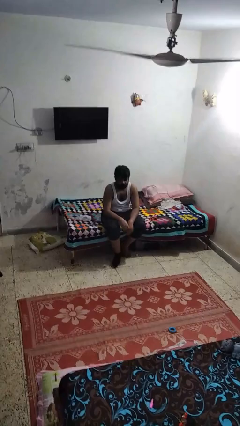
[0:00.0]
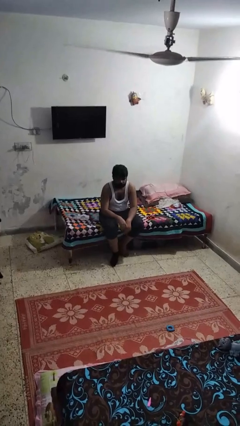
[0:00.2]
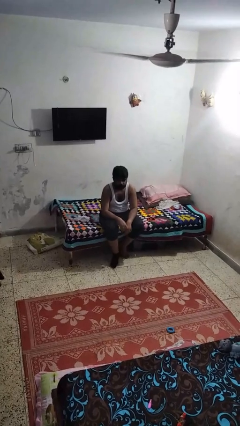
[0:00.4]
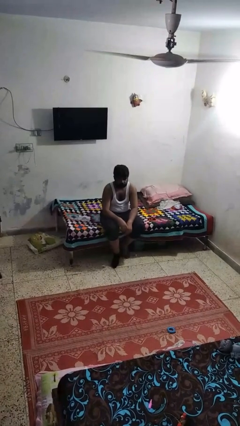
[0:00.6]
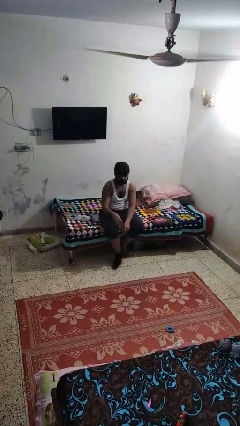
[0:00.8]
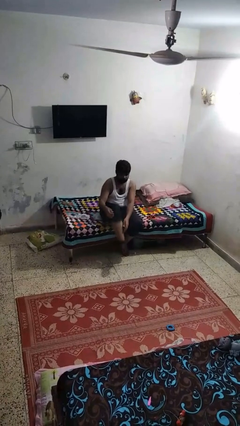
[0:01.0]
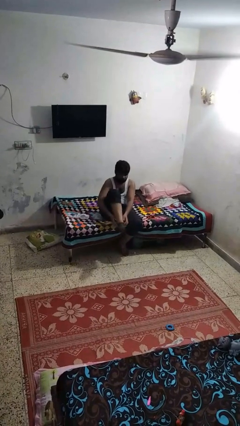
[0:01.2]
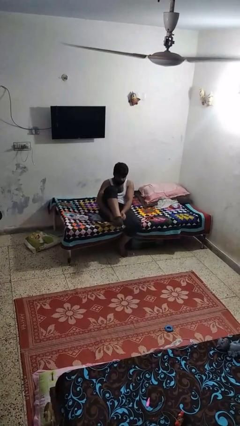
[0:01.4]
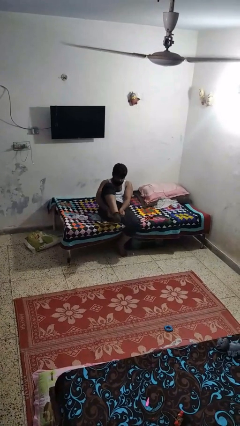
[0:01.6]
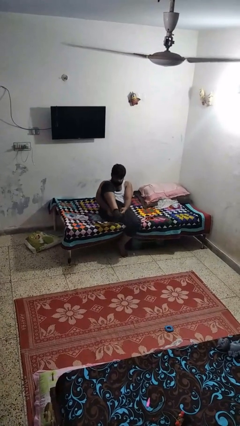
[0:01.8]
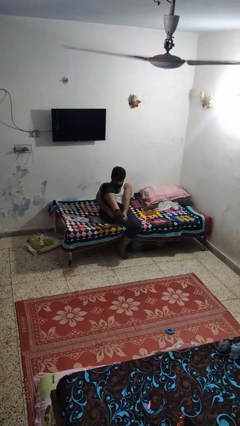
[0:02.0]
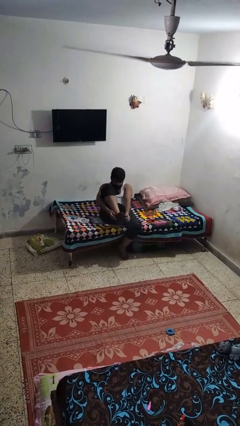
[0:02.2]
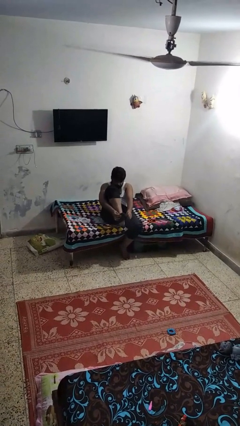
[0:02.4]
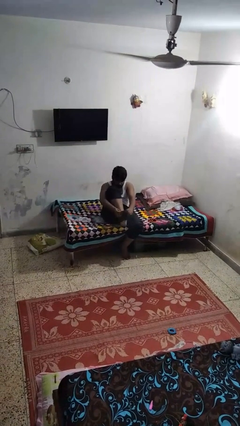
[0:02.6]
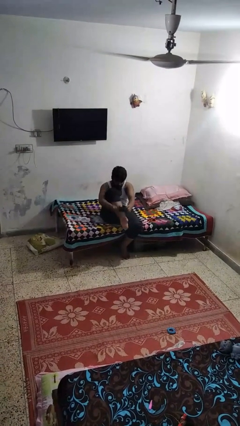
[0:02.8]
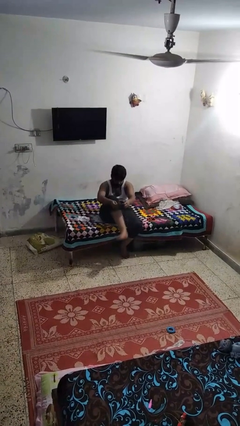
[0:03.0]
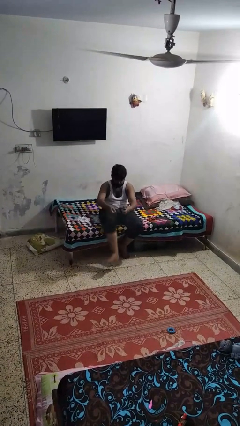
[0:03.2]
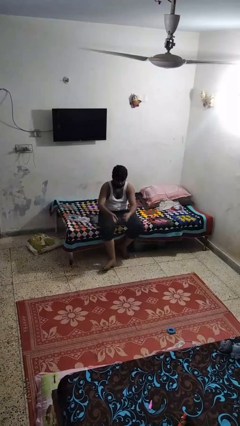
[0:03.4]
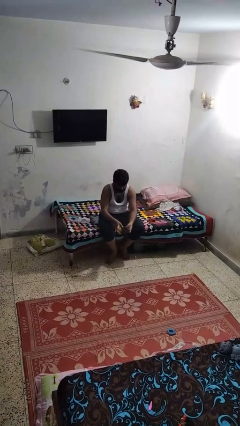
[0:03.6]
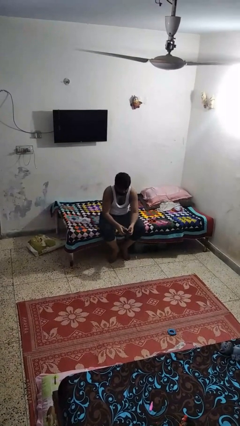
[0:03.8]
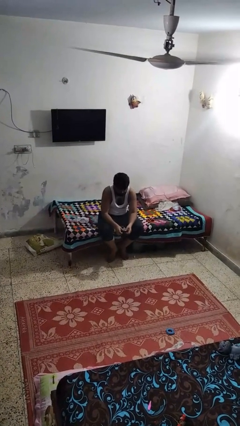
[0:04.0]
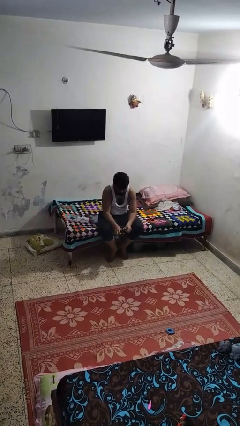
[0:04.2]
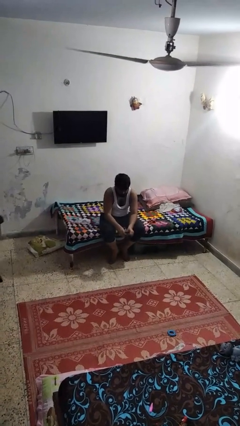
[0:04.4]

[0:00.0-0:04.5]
person takes off socks

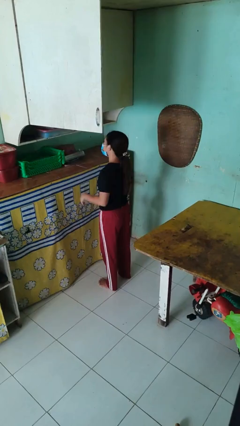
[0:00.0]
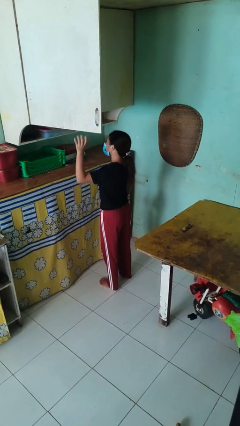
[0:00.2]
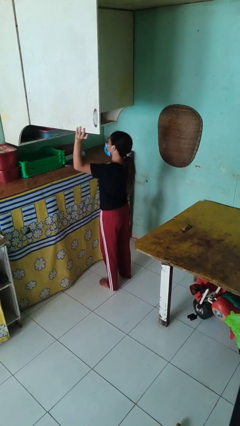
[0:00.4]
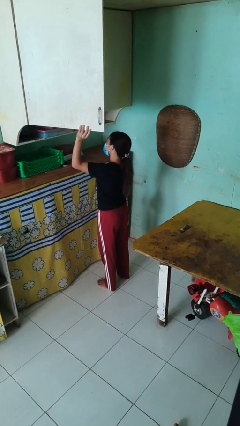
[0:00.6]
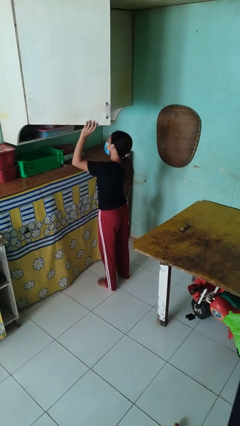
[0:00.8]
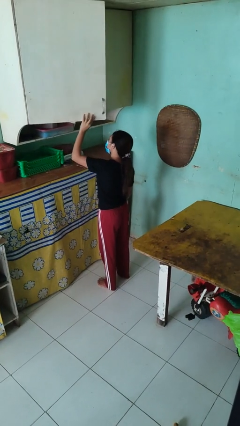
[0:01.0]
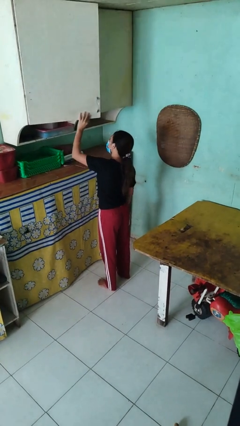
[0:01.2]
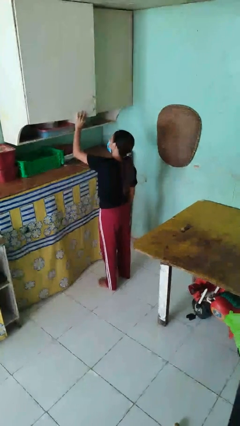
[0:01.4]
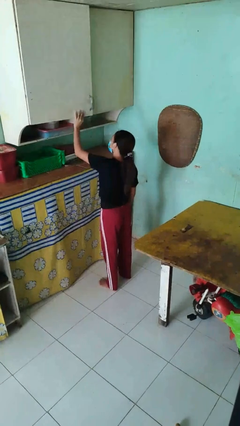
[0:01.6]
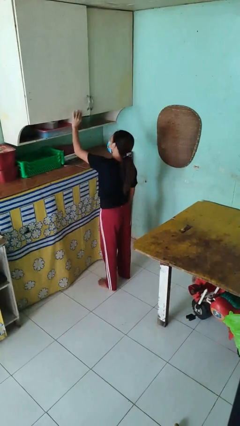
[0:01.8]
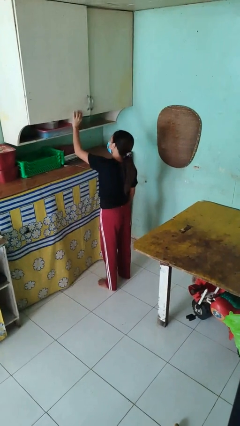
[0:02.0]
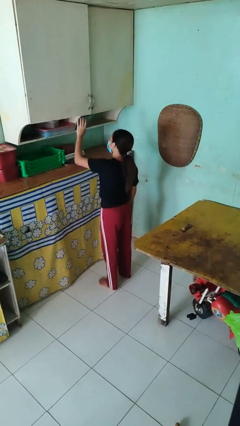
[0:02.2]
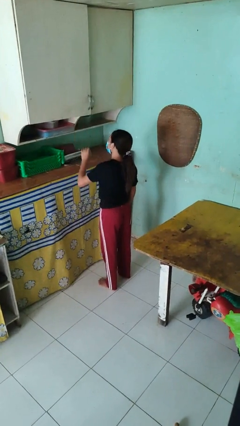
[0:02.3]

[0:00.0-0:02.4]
person closes cabinet

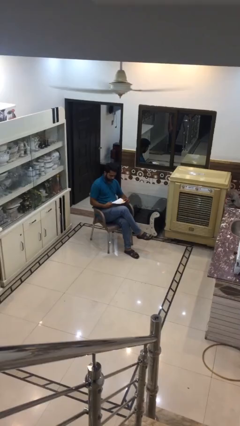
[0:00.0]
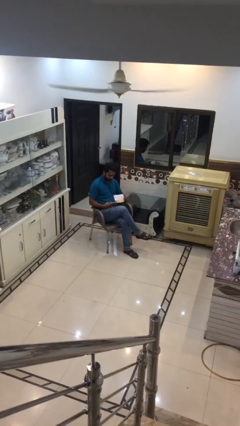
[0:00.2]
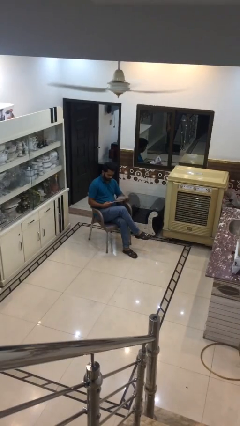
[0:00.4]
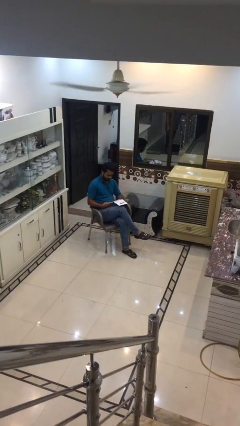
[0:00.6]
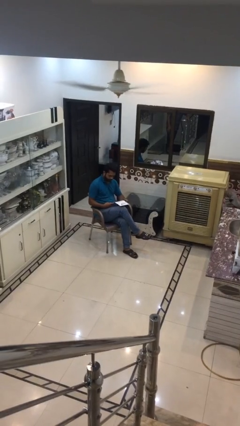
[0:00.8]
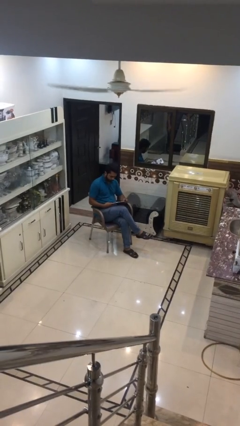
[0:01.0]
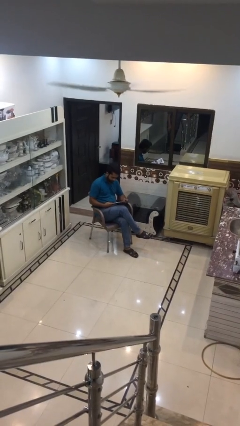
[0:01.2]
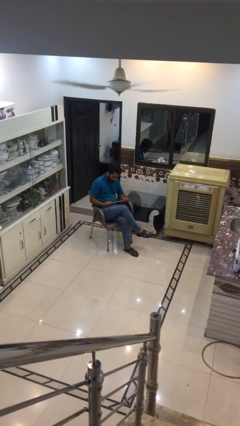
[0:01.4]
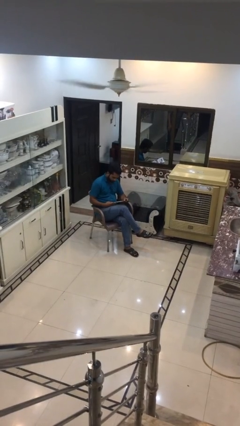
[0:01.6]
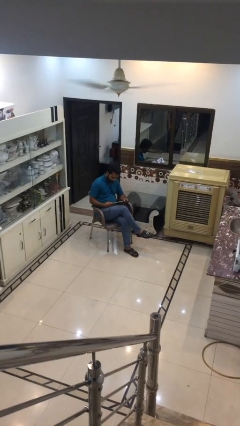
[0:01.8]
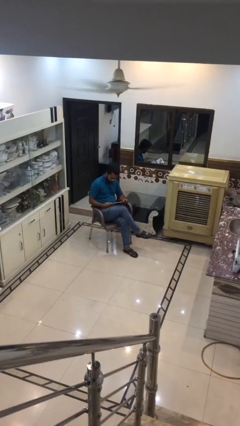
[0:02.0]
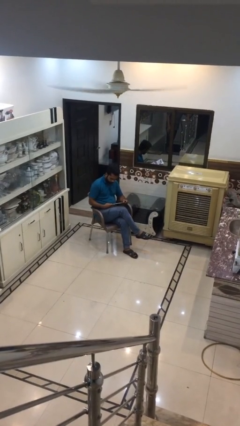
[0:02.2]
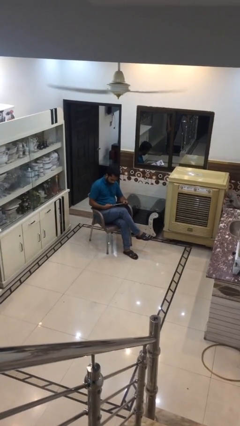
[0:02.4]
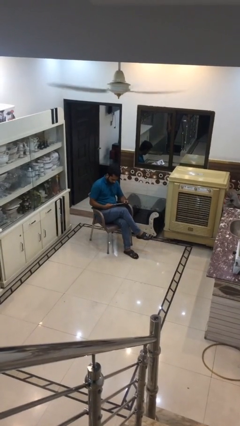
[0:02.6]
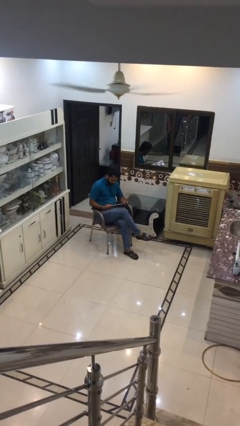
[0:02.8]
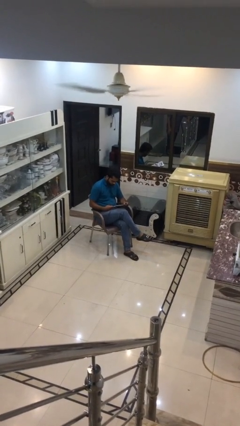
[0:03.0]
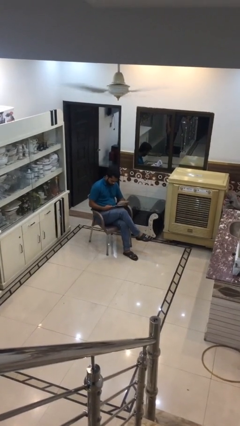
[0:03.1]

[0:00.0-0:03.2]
person reads document

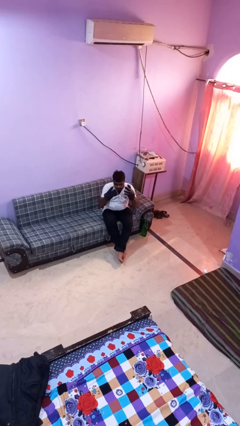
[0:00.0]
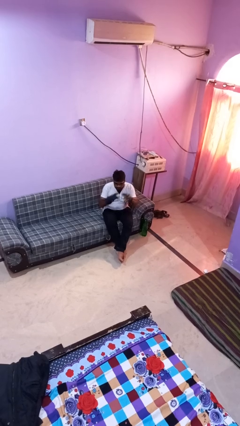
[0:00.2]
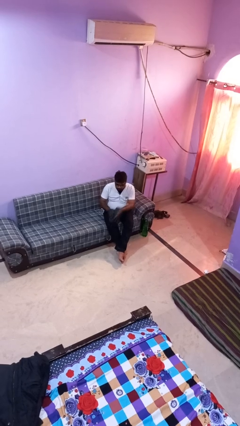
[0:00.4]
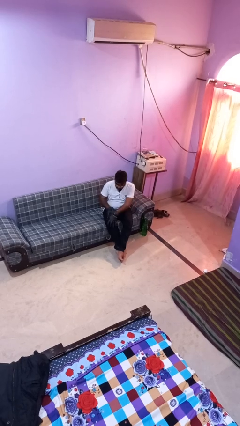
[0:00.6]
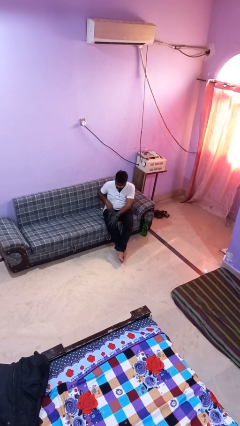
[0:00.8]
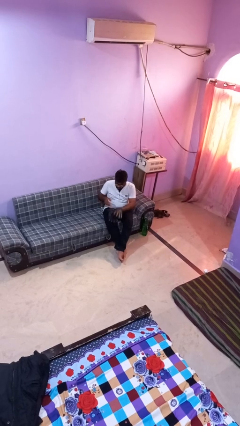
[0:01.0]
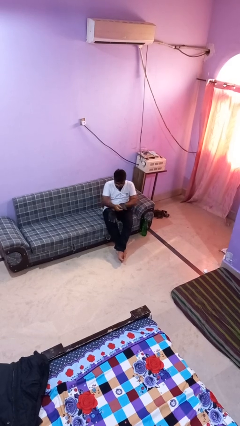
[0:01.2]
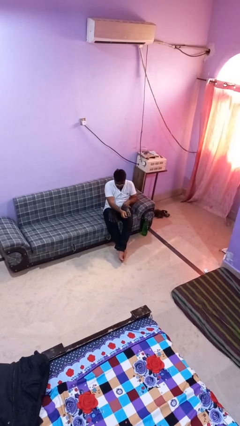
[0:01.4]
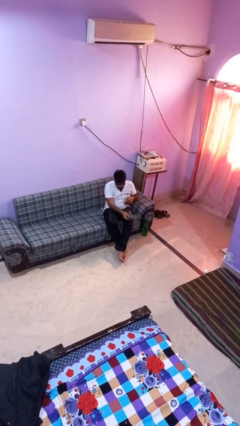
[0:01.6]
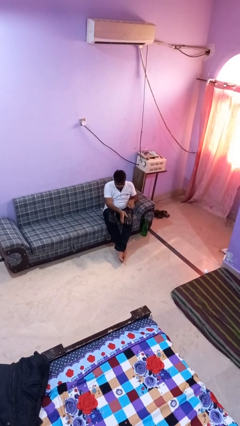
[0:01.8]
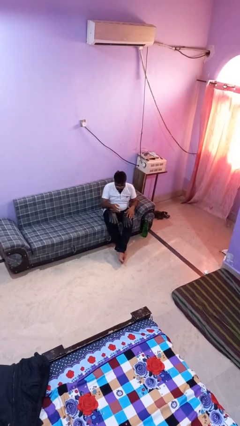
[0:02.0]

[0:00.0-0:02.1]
person takes off gloves

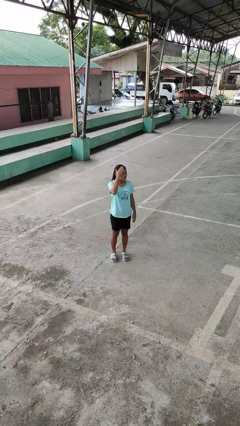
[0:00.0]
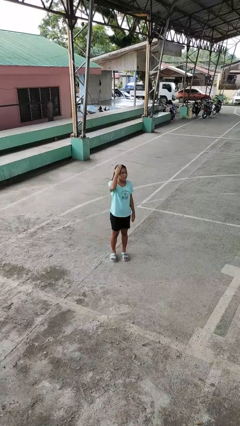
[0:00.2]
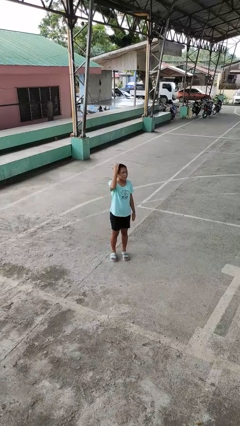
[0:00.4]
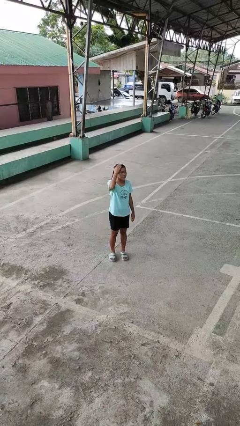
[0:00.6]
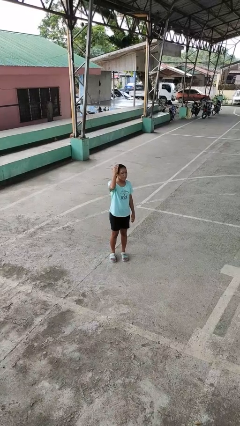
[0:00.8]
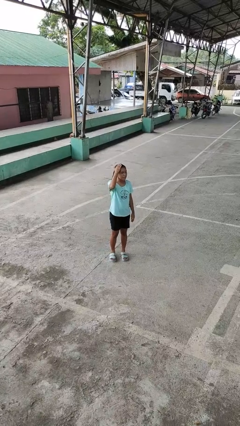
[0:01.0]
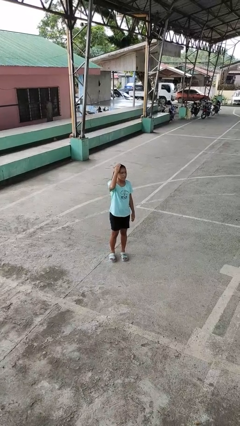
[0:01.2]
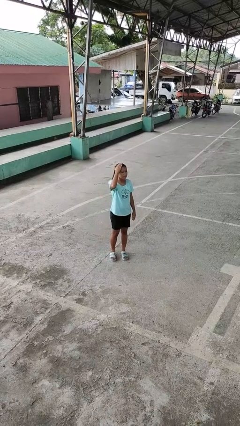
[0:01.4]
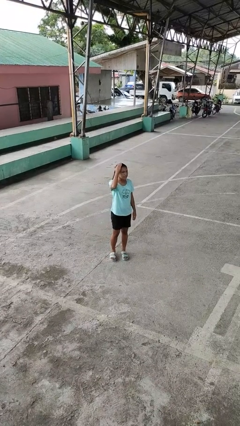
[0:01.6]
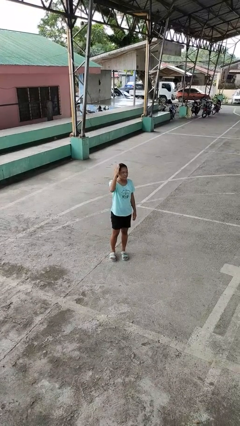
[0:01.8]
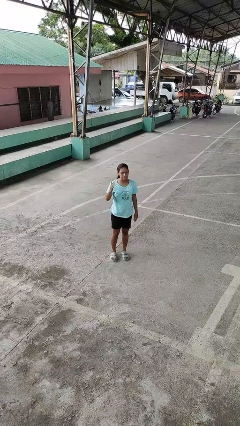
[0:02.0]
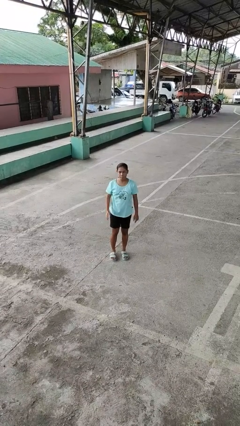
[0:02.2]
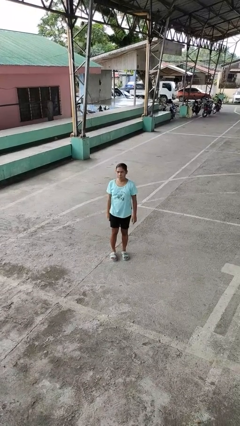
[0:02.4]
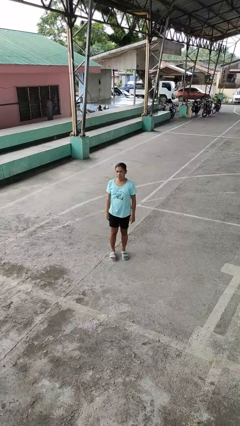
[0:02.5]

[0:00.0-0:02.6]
person pats head

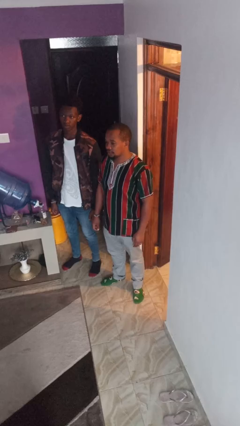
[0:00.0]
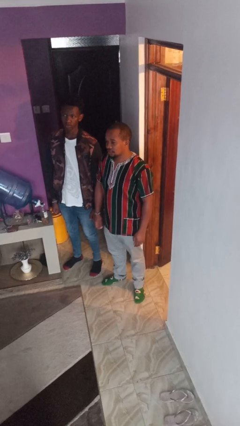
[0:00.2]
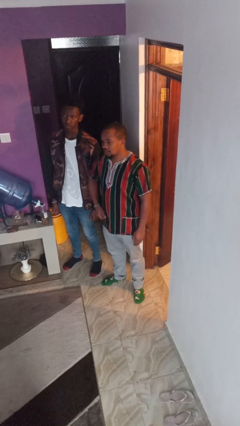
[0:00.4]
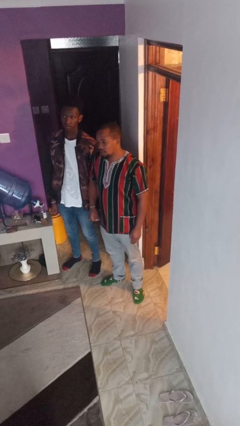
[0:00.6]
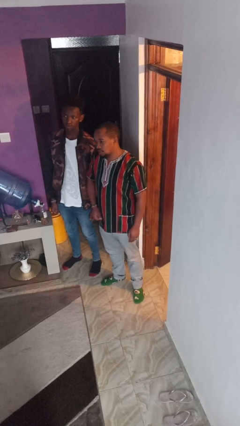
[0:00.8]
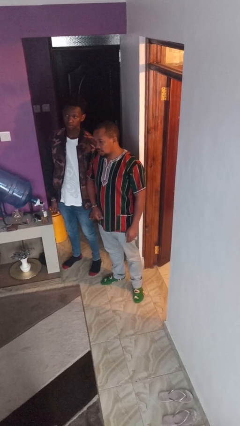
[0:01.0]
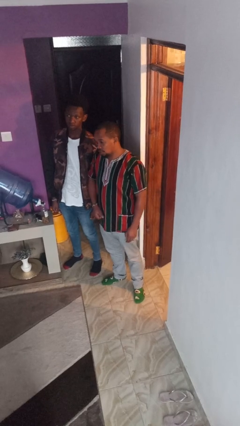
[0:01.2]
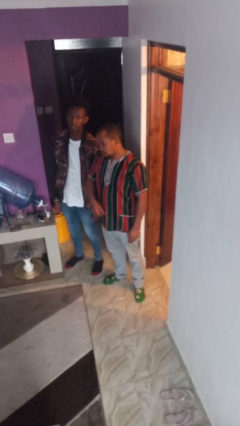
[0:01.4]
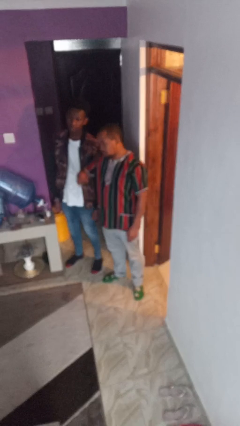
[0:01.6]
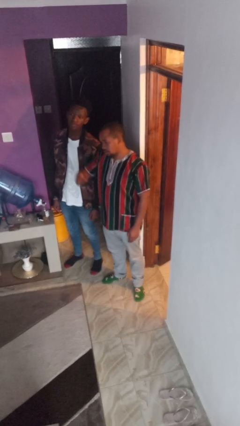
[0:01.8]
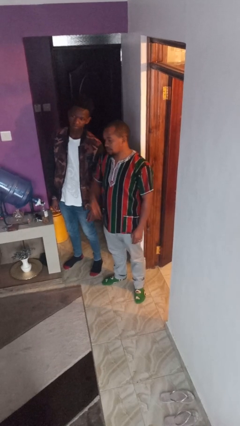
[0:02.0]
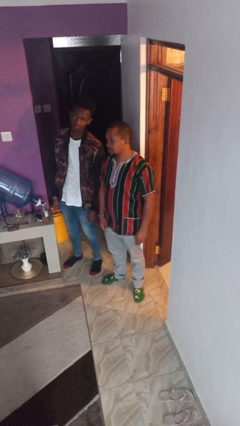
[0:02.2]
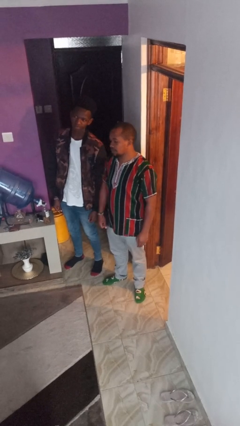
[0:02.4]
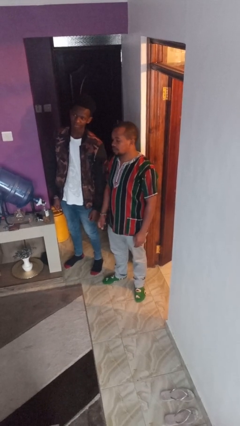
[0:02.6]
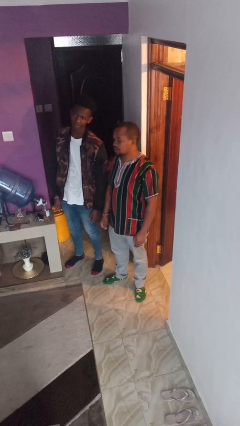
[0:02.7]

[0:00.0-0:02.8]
person nudges person with elbow
